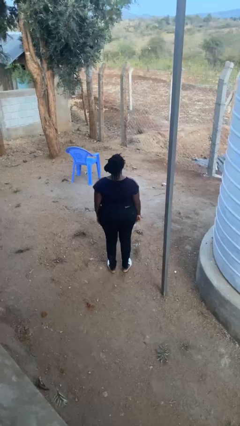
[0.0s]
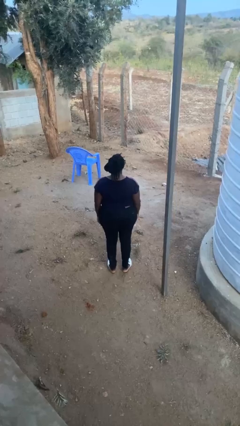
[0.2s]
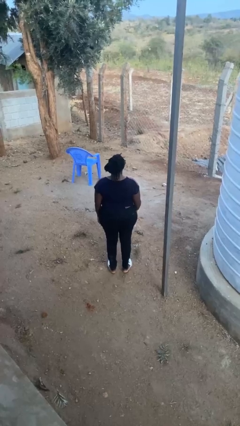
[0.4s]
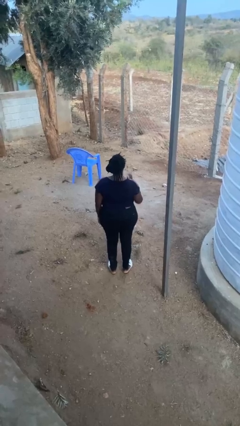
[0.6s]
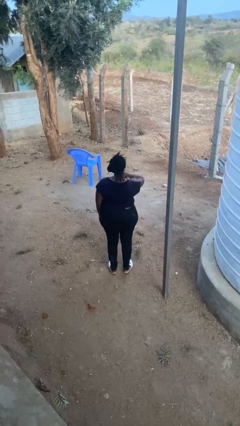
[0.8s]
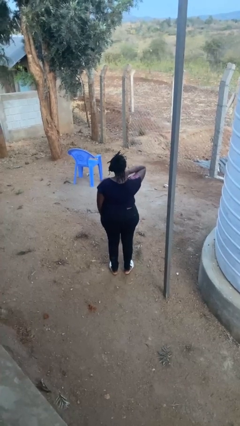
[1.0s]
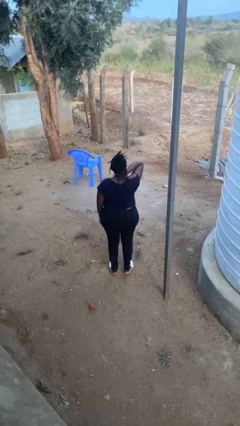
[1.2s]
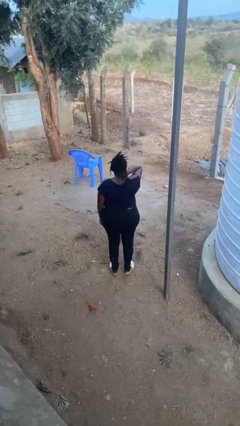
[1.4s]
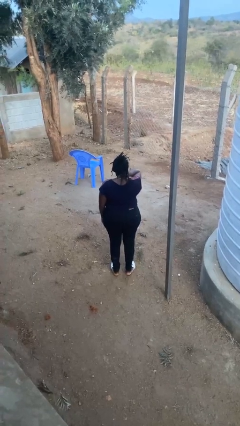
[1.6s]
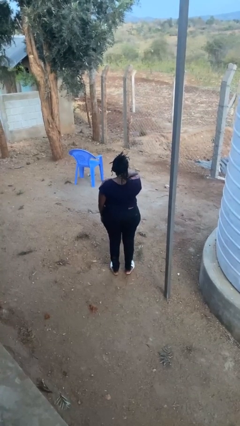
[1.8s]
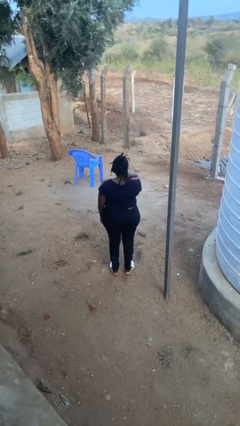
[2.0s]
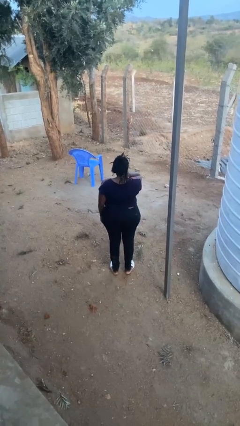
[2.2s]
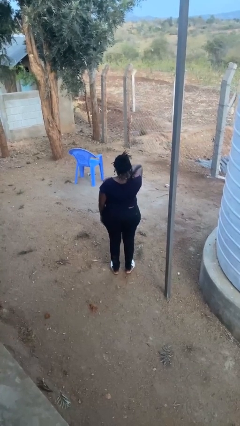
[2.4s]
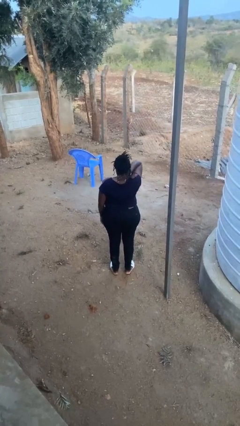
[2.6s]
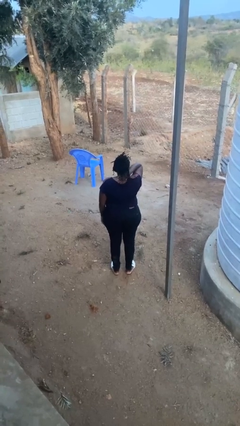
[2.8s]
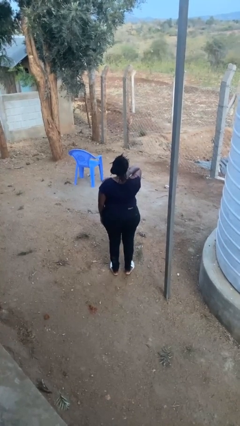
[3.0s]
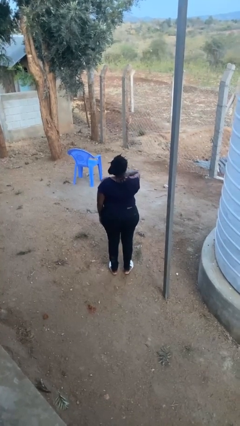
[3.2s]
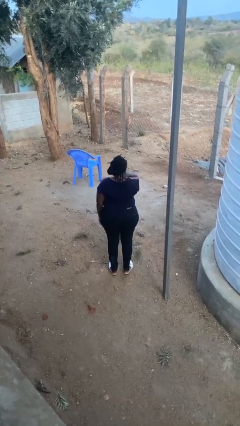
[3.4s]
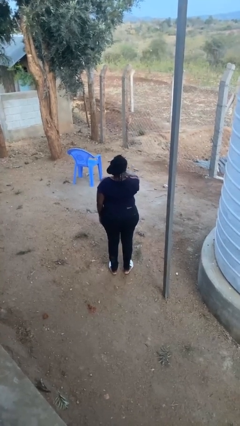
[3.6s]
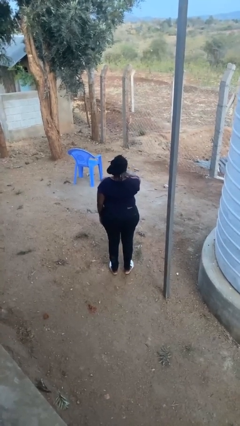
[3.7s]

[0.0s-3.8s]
person rubs neck

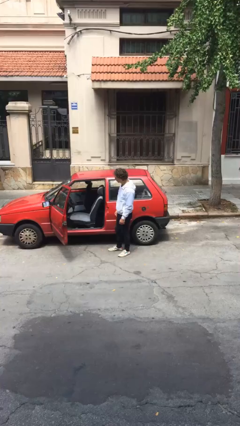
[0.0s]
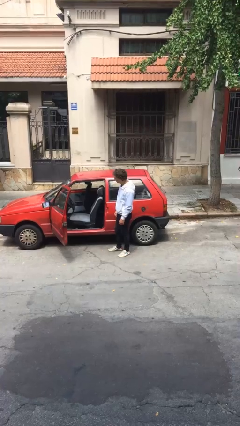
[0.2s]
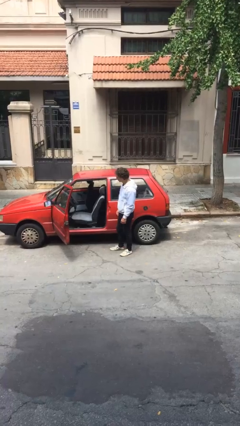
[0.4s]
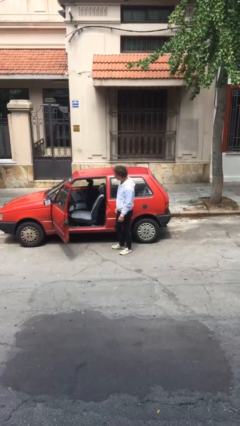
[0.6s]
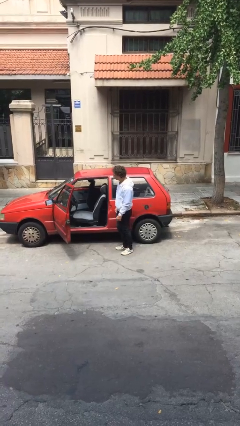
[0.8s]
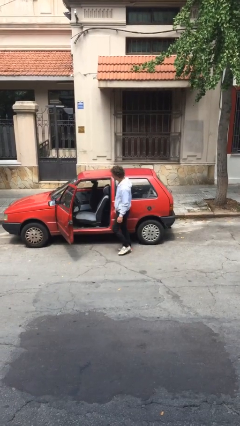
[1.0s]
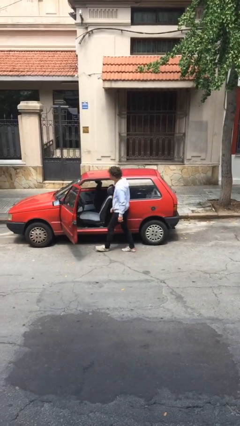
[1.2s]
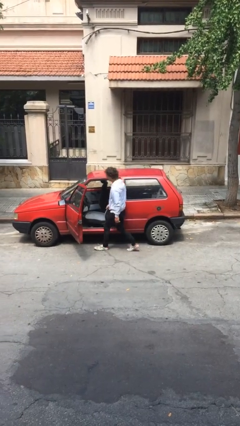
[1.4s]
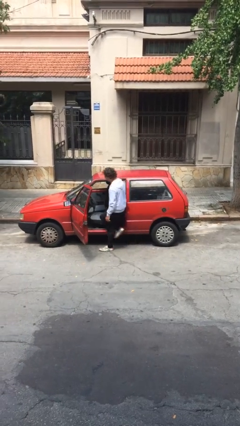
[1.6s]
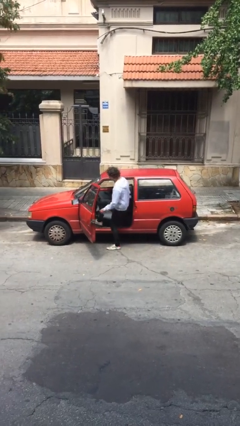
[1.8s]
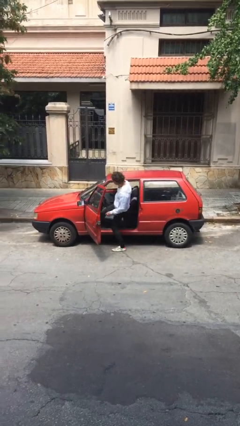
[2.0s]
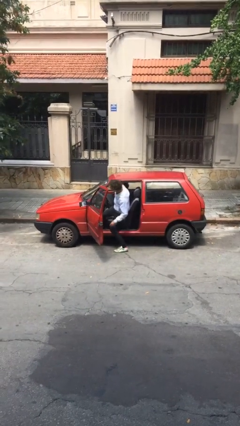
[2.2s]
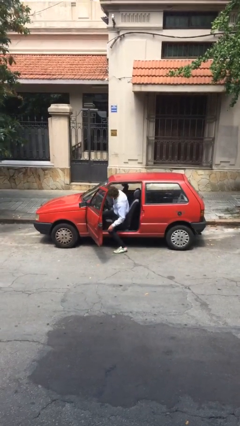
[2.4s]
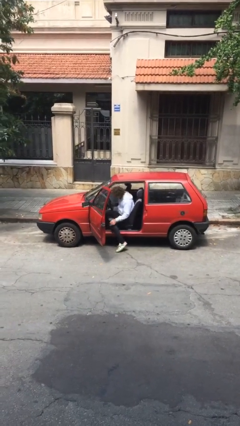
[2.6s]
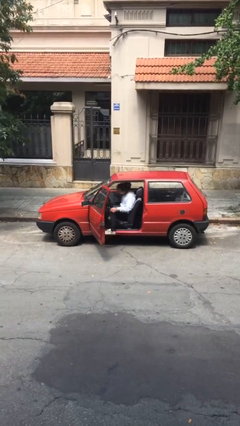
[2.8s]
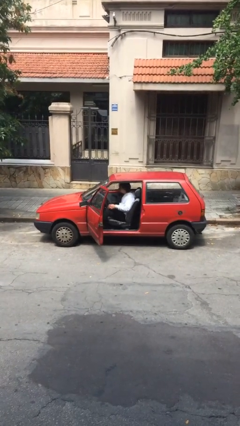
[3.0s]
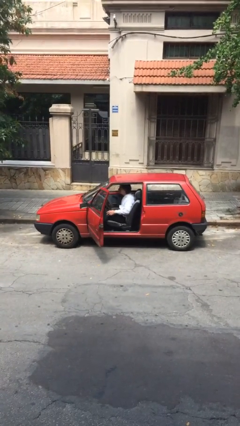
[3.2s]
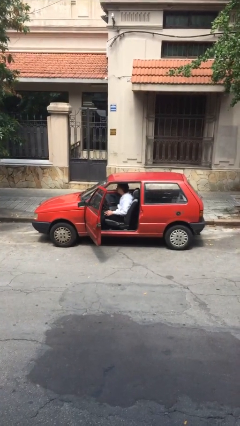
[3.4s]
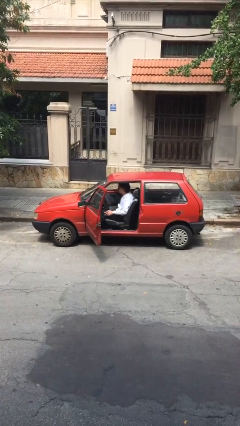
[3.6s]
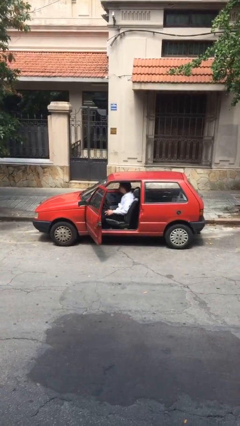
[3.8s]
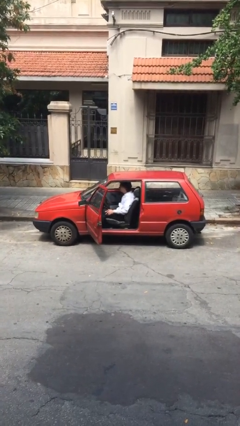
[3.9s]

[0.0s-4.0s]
person enters car

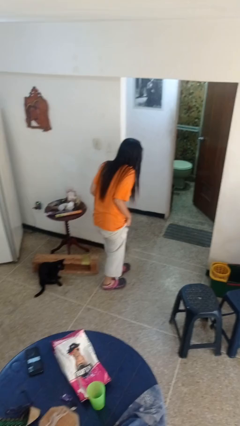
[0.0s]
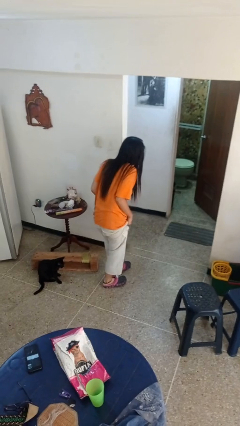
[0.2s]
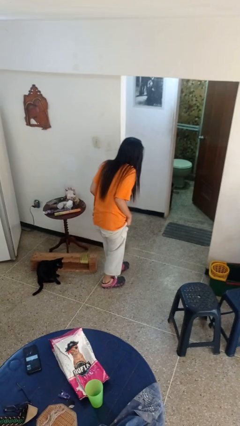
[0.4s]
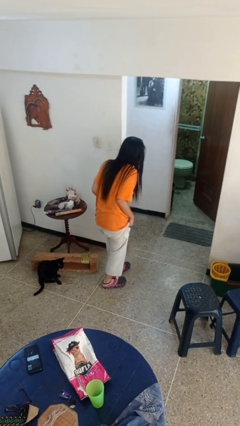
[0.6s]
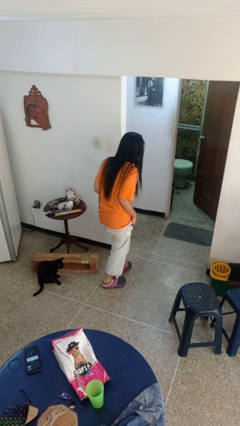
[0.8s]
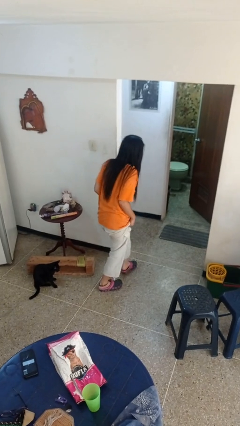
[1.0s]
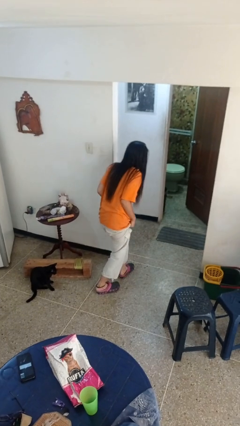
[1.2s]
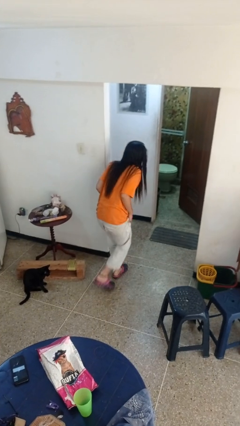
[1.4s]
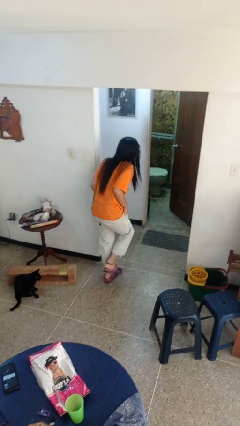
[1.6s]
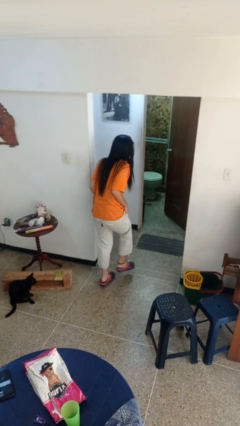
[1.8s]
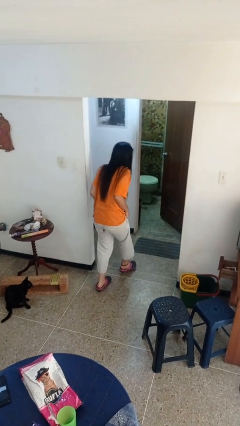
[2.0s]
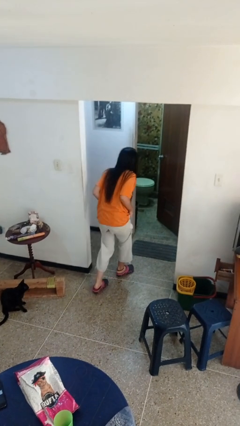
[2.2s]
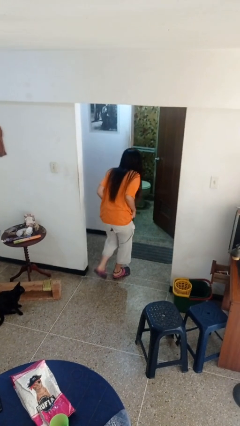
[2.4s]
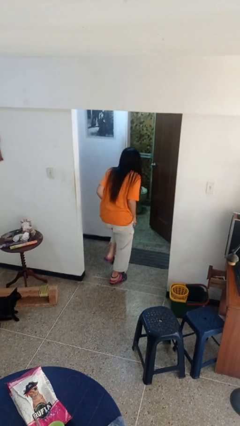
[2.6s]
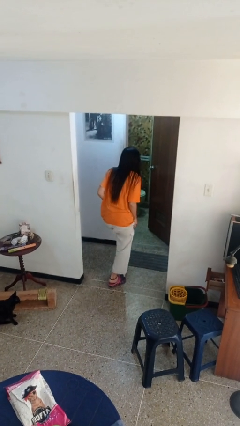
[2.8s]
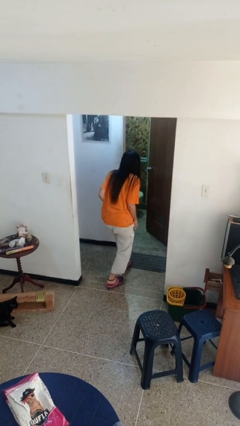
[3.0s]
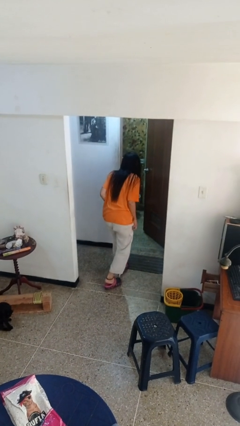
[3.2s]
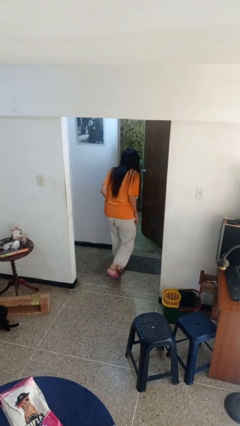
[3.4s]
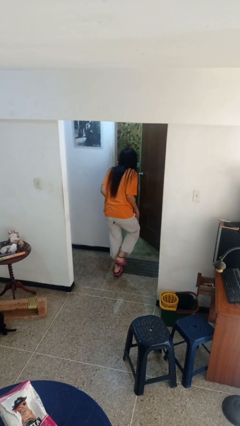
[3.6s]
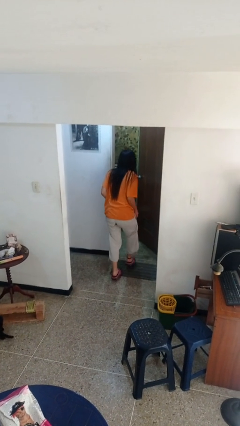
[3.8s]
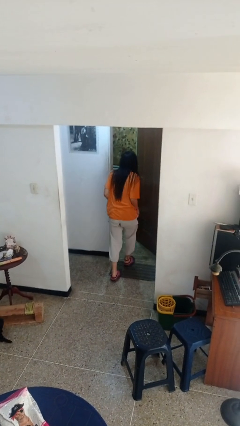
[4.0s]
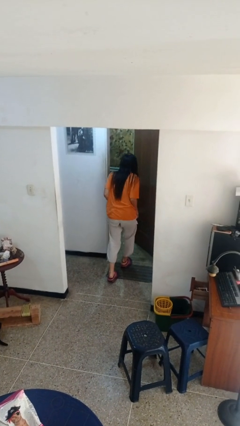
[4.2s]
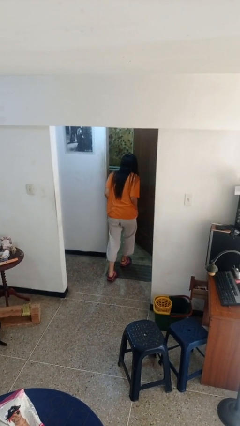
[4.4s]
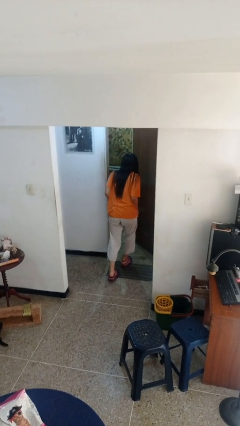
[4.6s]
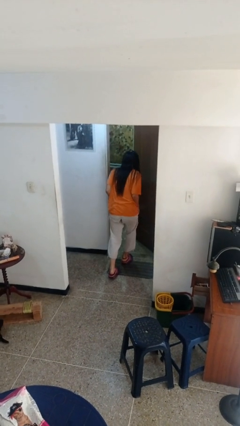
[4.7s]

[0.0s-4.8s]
person walks tiptoe

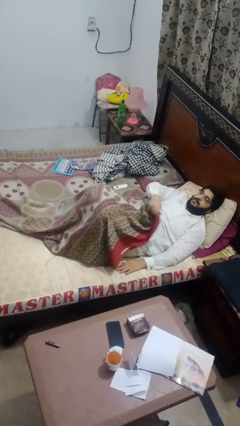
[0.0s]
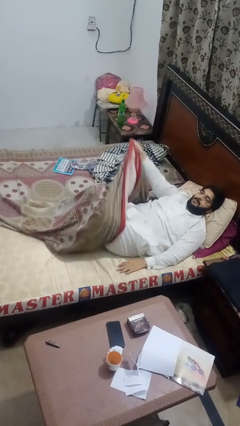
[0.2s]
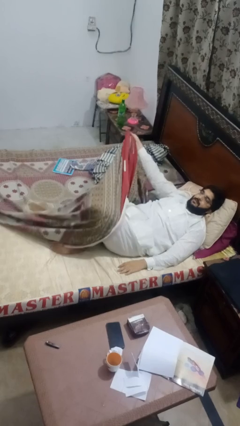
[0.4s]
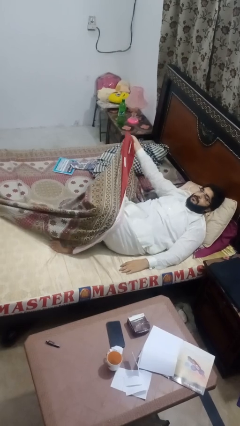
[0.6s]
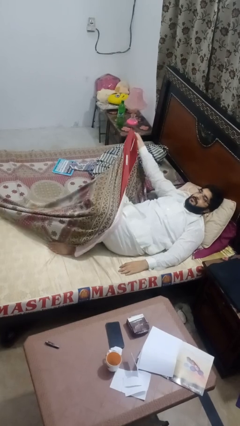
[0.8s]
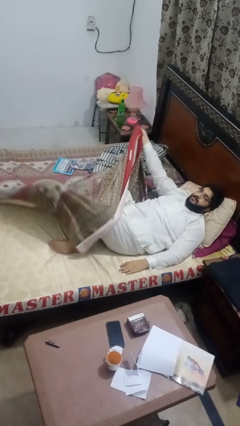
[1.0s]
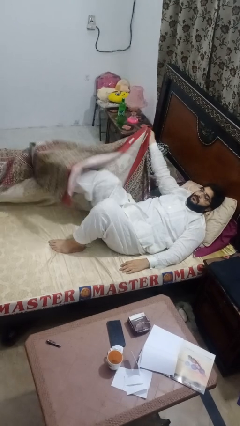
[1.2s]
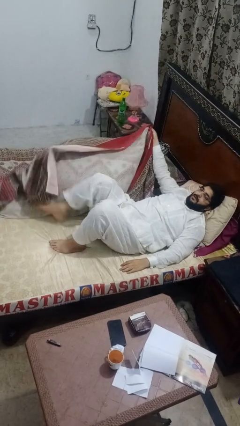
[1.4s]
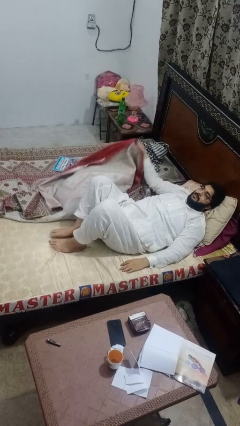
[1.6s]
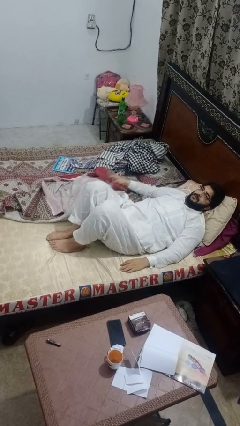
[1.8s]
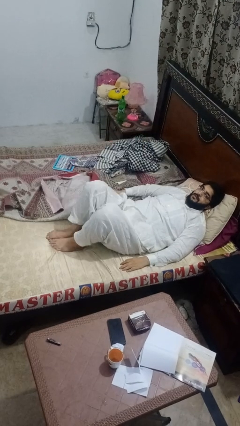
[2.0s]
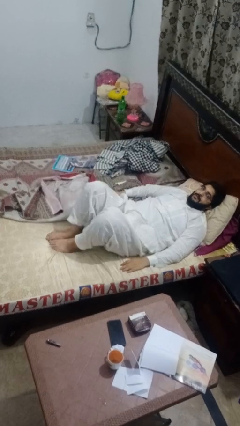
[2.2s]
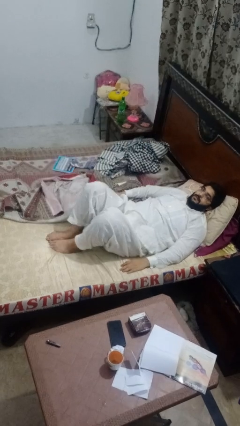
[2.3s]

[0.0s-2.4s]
person uncovers with bedsheets

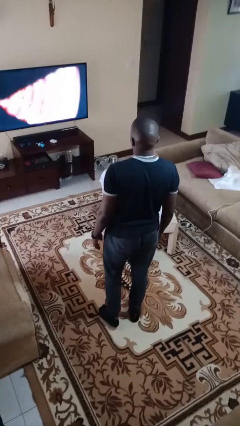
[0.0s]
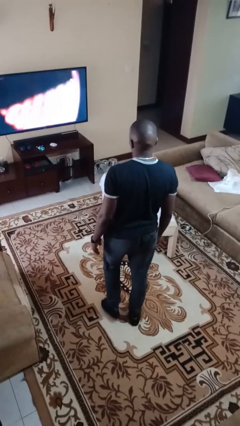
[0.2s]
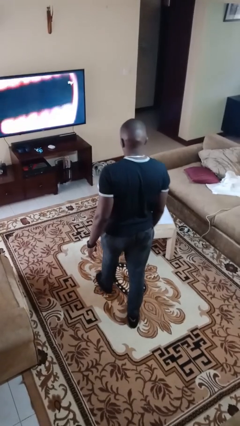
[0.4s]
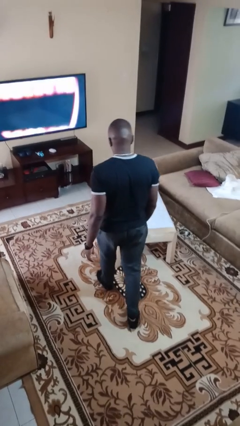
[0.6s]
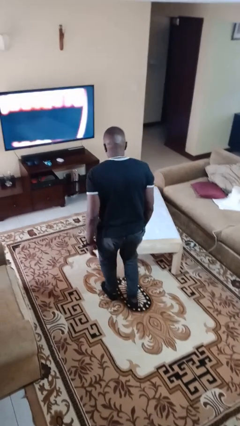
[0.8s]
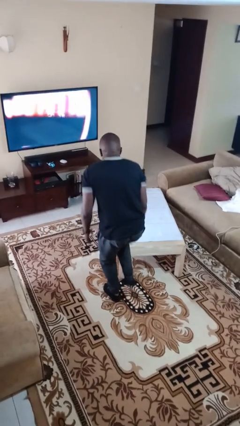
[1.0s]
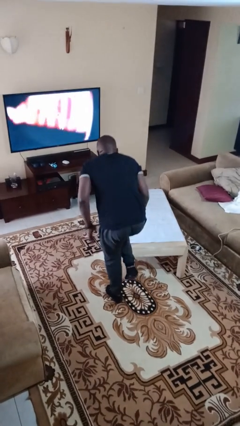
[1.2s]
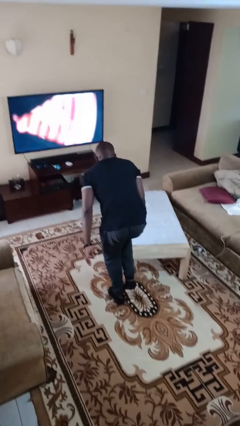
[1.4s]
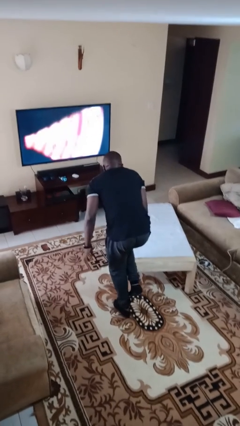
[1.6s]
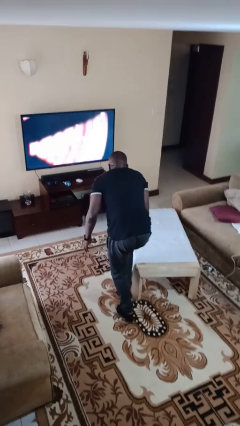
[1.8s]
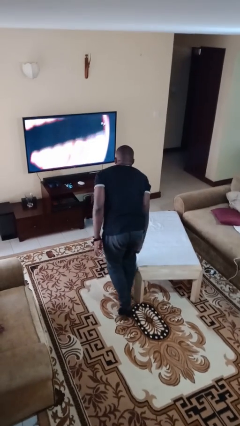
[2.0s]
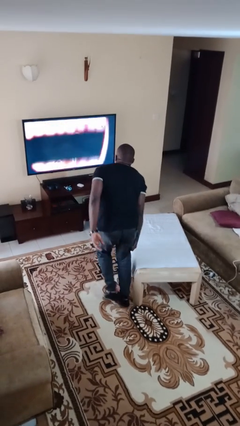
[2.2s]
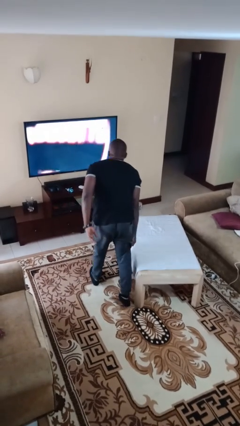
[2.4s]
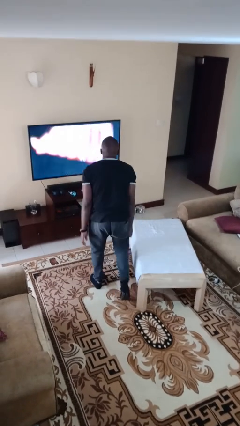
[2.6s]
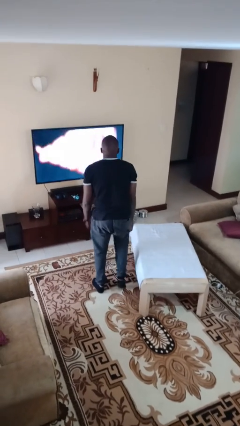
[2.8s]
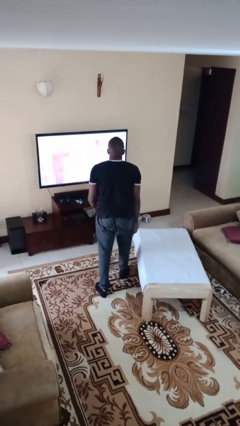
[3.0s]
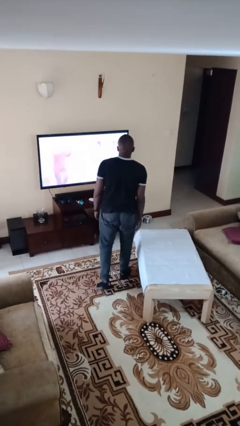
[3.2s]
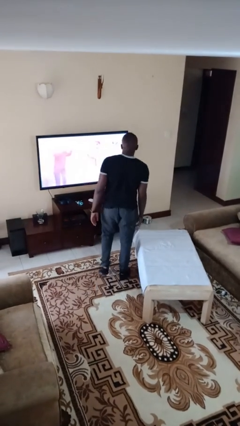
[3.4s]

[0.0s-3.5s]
person bumps into table
